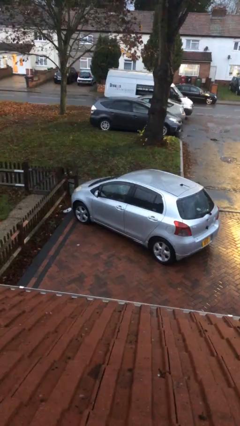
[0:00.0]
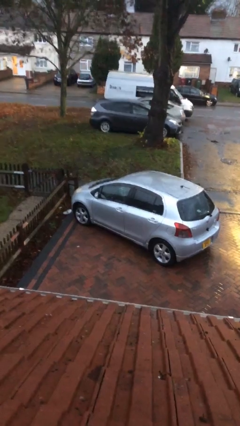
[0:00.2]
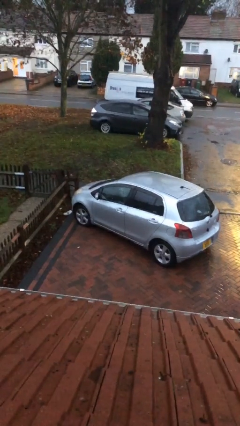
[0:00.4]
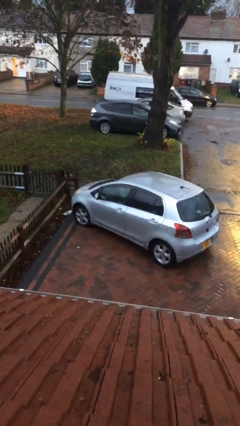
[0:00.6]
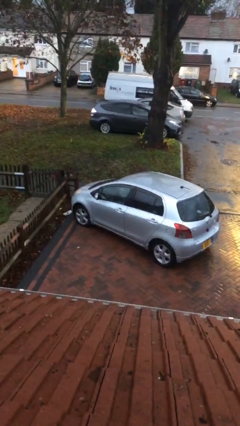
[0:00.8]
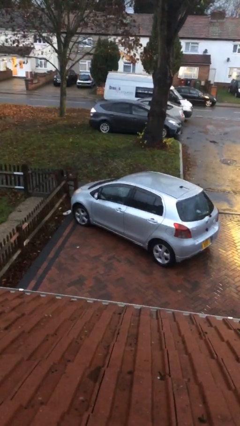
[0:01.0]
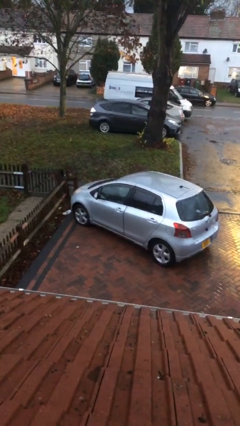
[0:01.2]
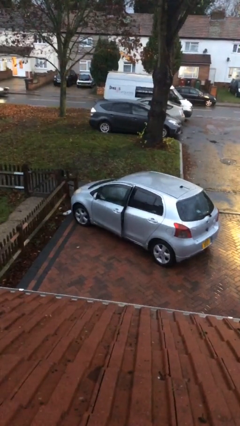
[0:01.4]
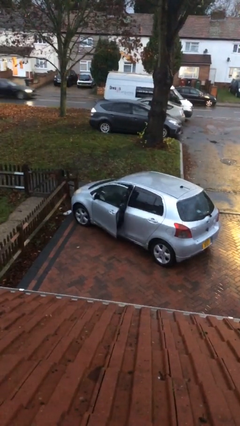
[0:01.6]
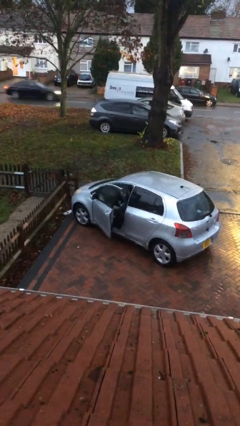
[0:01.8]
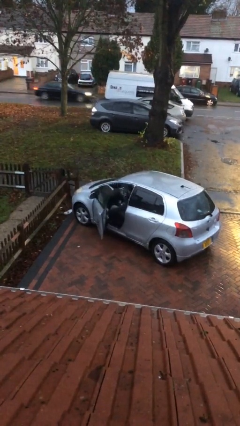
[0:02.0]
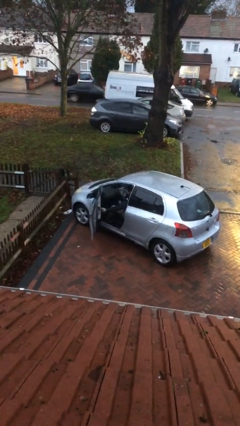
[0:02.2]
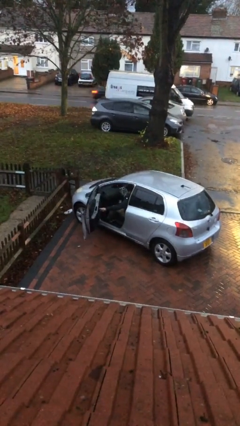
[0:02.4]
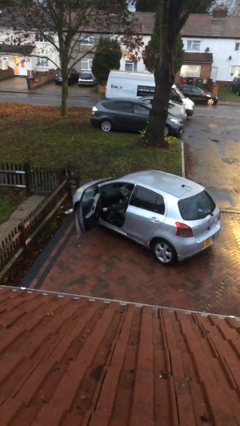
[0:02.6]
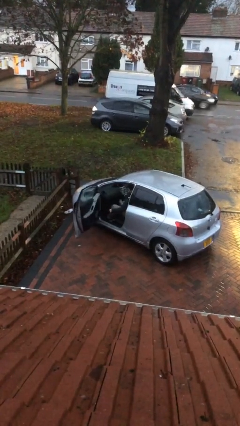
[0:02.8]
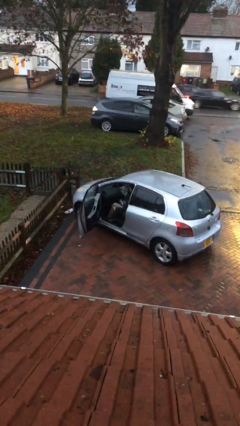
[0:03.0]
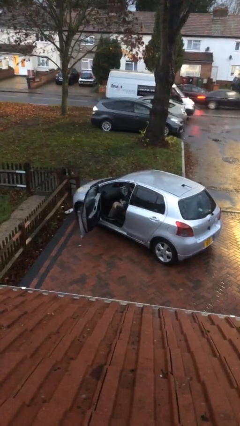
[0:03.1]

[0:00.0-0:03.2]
person opens car door

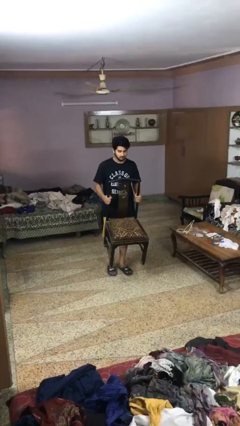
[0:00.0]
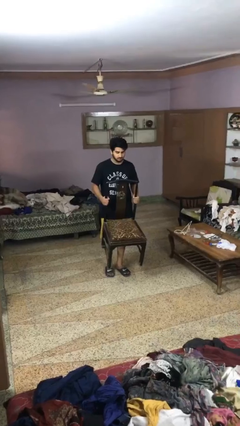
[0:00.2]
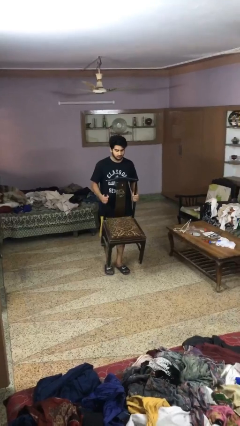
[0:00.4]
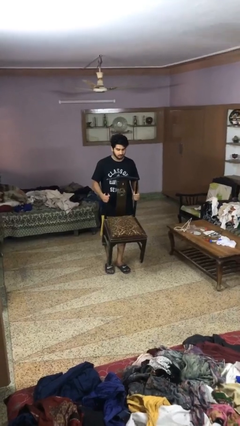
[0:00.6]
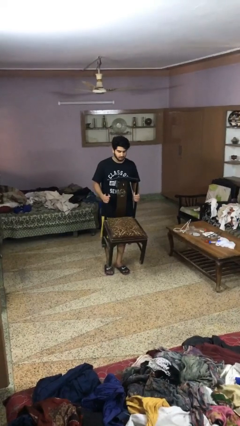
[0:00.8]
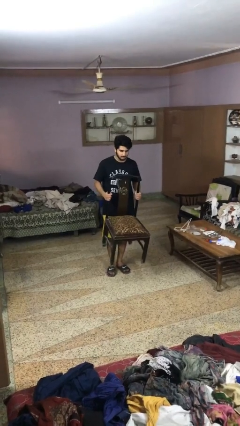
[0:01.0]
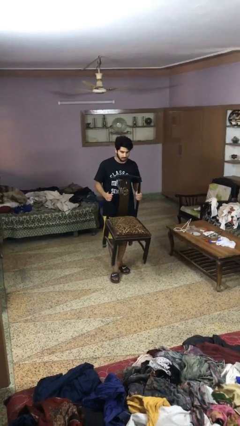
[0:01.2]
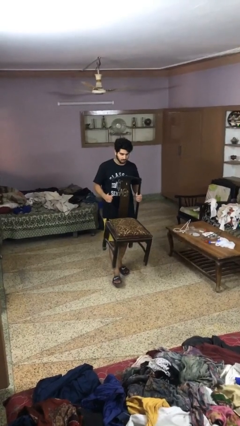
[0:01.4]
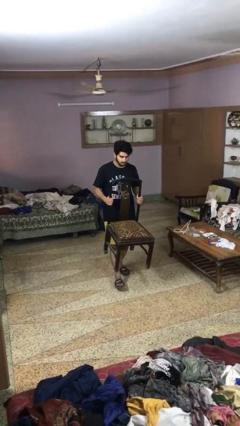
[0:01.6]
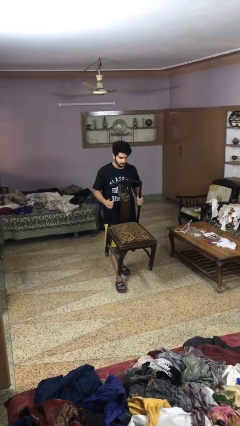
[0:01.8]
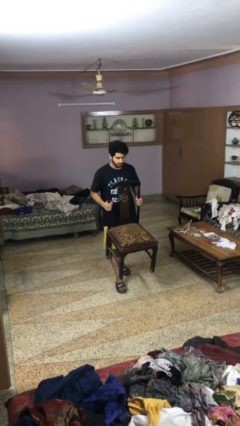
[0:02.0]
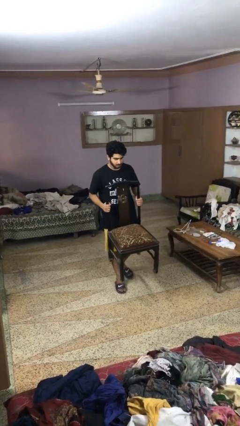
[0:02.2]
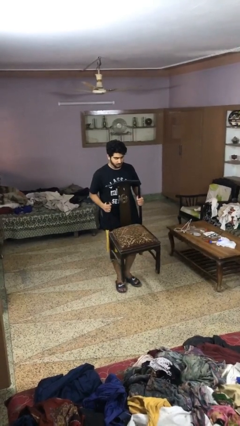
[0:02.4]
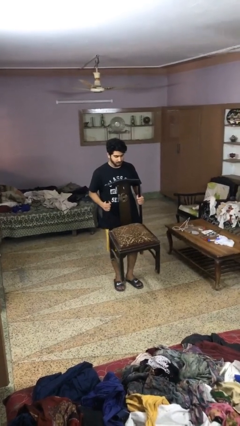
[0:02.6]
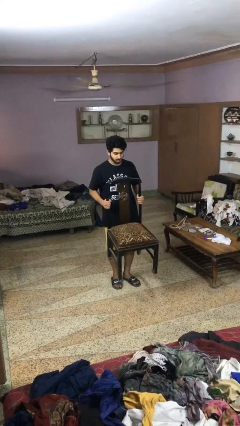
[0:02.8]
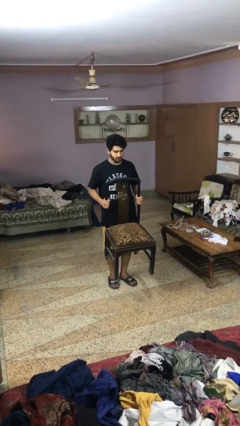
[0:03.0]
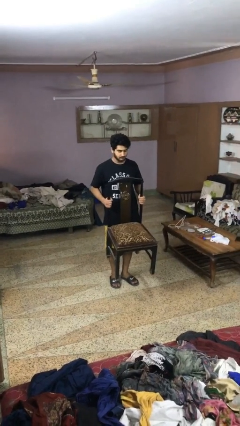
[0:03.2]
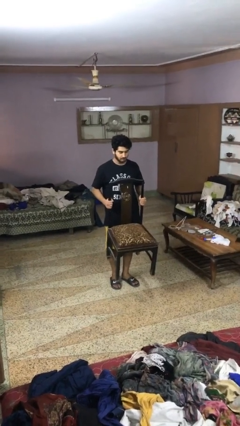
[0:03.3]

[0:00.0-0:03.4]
person carries furniture

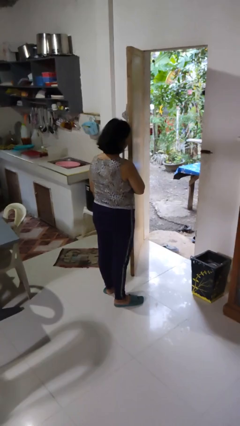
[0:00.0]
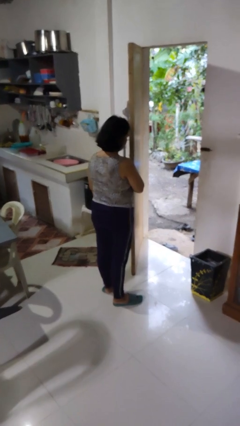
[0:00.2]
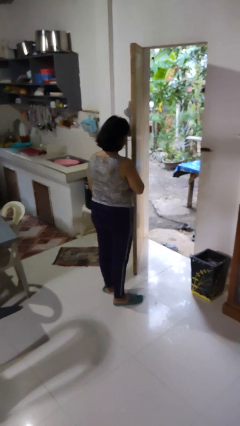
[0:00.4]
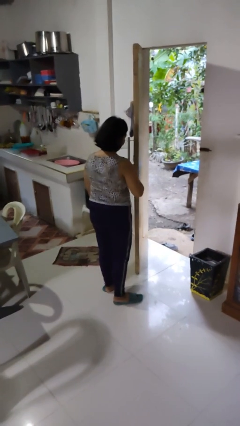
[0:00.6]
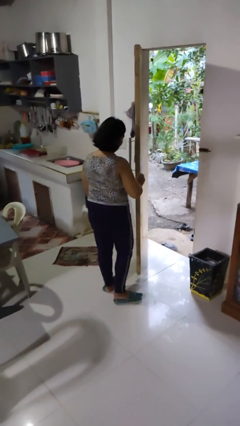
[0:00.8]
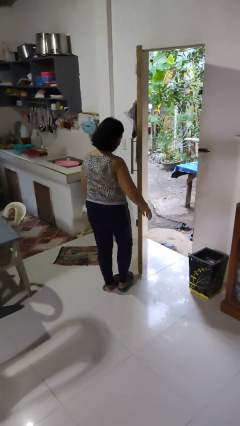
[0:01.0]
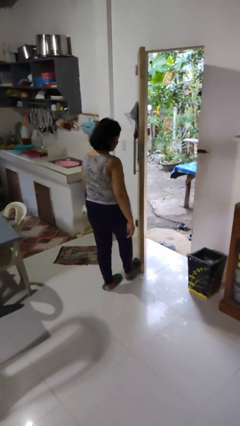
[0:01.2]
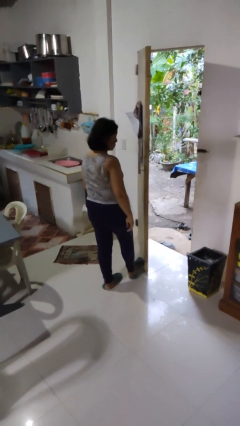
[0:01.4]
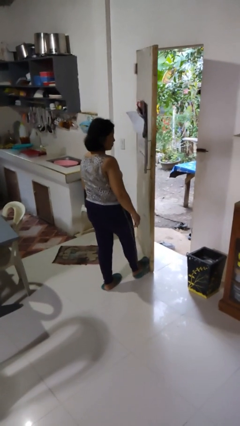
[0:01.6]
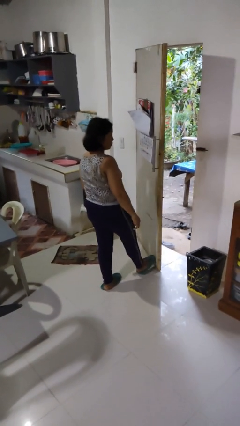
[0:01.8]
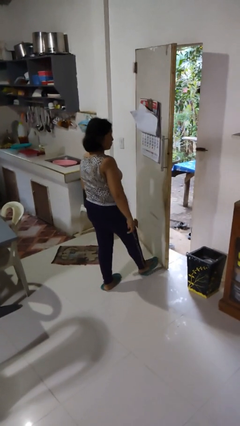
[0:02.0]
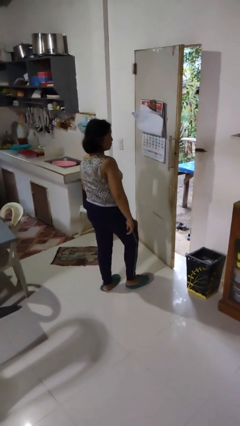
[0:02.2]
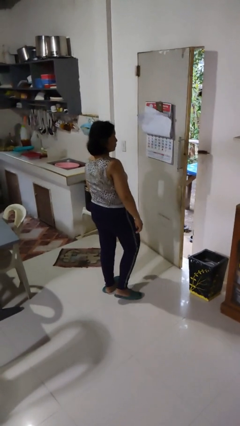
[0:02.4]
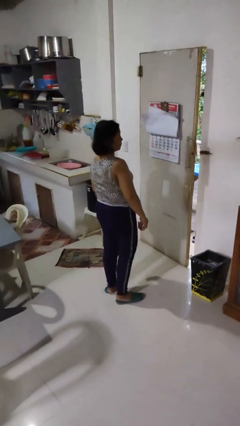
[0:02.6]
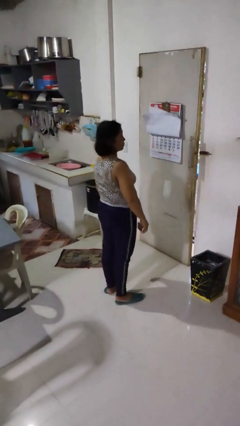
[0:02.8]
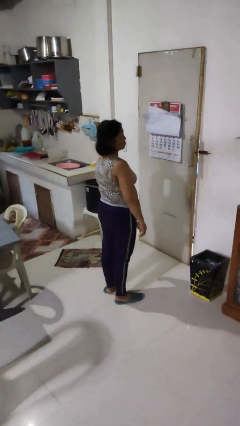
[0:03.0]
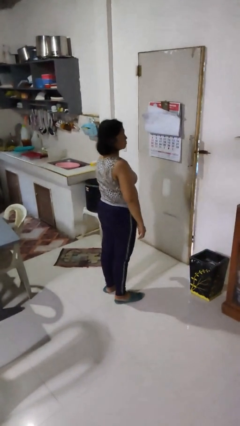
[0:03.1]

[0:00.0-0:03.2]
person closes door with foot

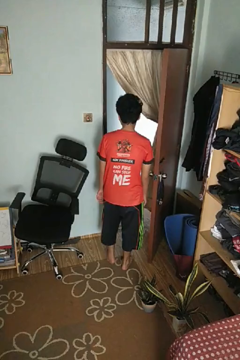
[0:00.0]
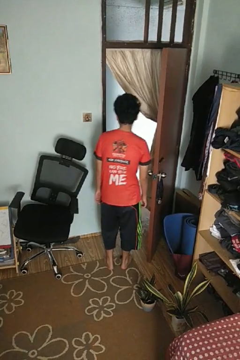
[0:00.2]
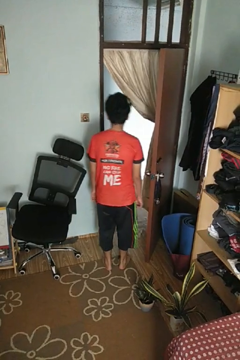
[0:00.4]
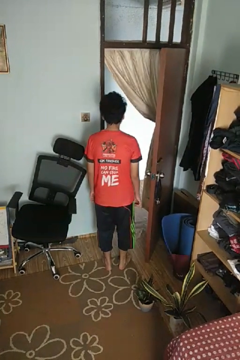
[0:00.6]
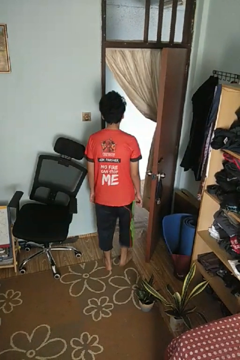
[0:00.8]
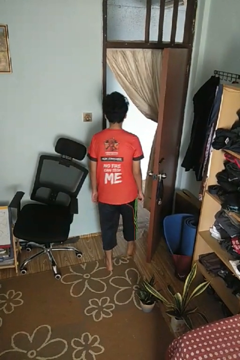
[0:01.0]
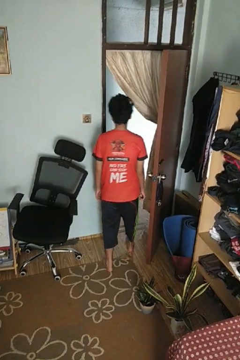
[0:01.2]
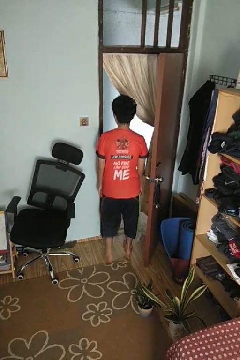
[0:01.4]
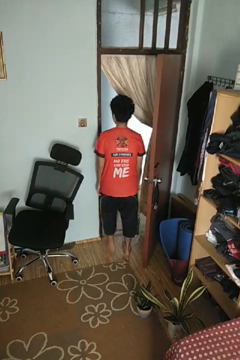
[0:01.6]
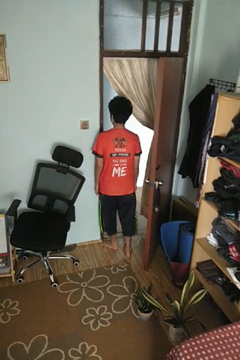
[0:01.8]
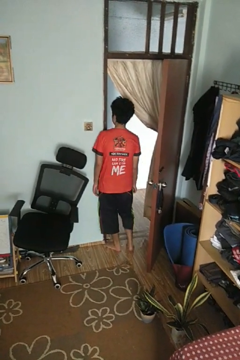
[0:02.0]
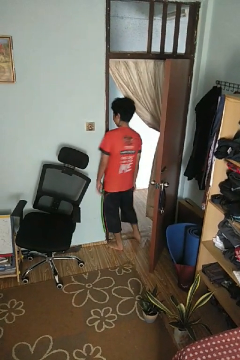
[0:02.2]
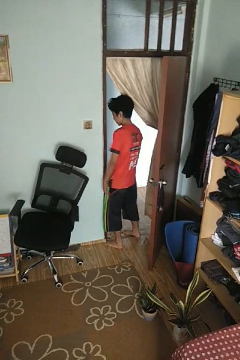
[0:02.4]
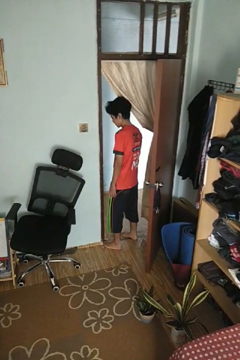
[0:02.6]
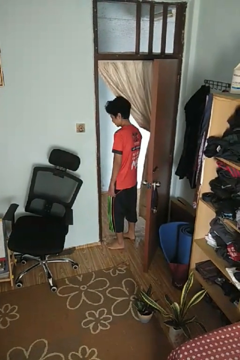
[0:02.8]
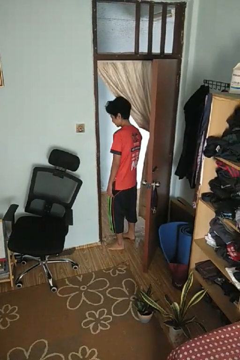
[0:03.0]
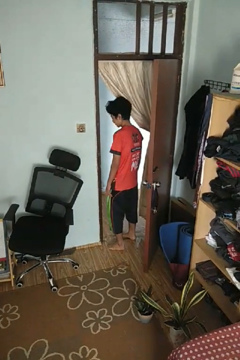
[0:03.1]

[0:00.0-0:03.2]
person bumps into wall

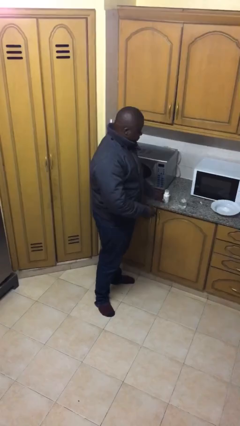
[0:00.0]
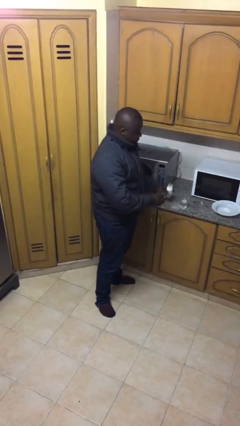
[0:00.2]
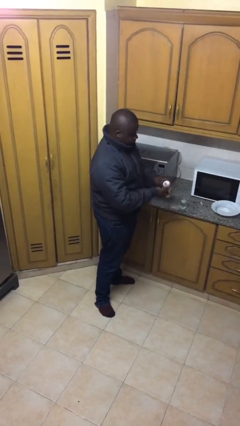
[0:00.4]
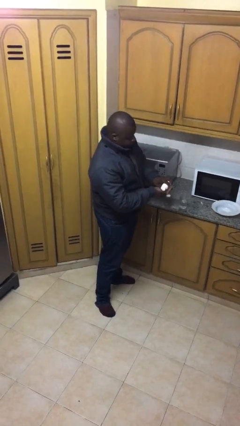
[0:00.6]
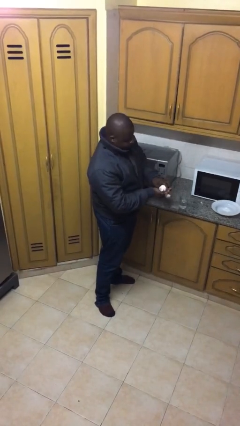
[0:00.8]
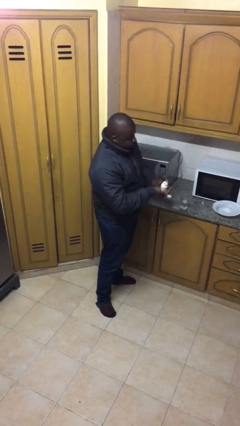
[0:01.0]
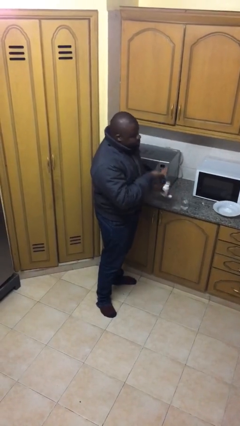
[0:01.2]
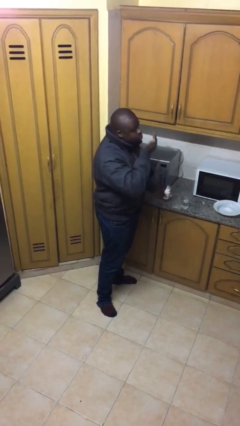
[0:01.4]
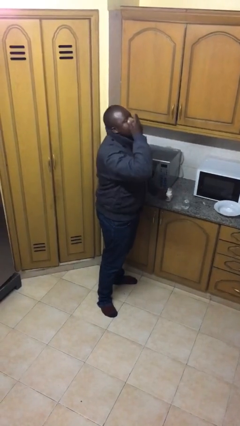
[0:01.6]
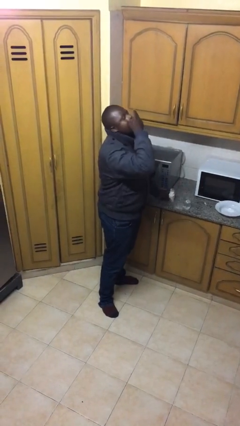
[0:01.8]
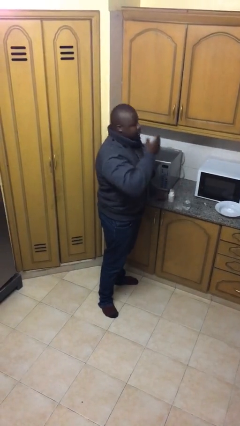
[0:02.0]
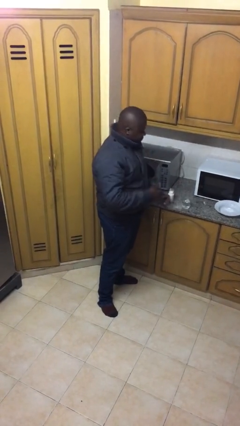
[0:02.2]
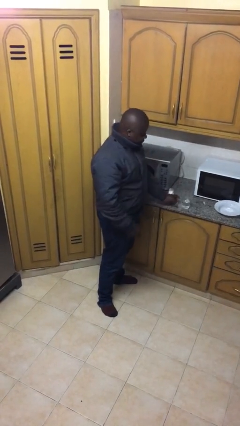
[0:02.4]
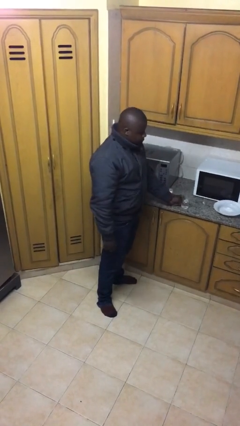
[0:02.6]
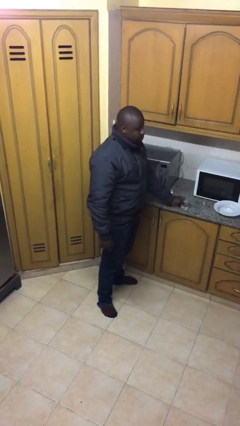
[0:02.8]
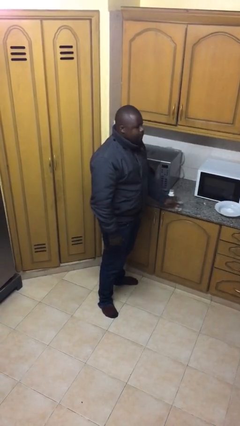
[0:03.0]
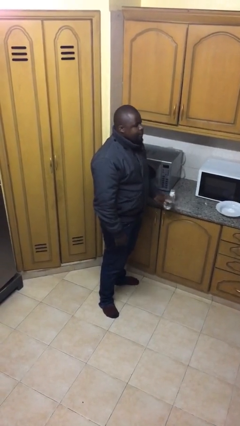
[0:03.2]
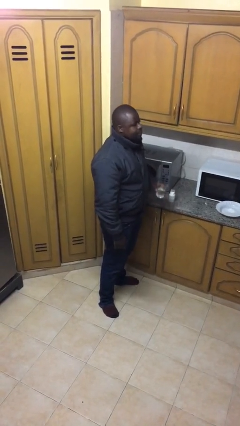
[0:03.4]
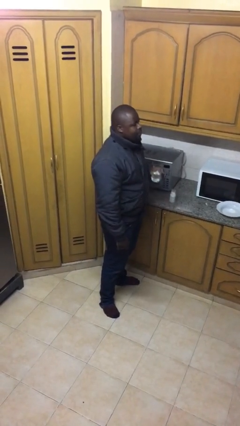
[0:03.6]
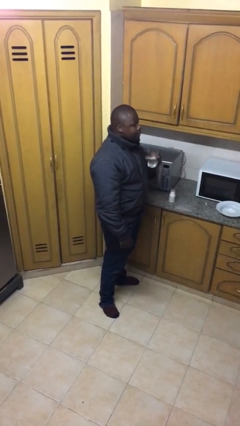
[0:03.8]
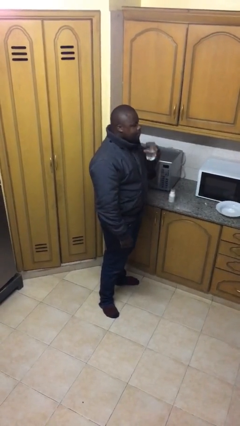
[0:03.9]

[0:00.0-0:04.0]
person takes medicine pills

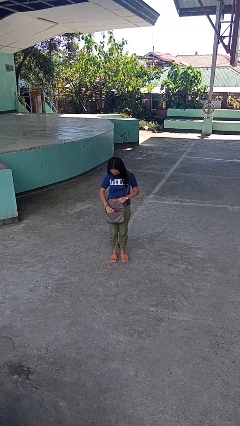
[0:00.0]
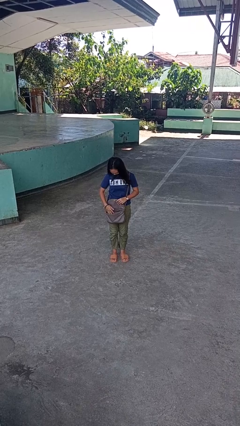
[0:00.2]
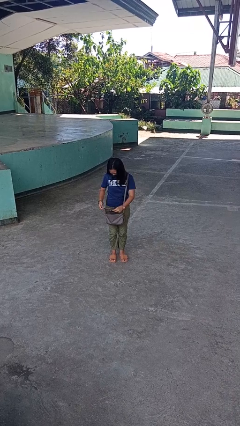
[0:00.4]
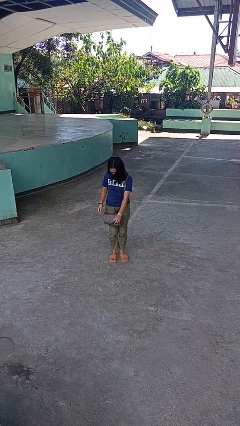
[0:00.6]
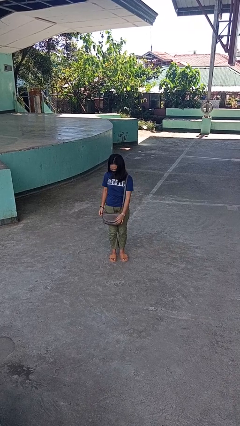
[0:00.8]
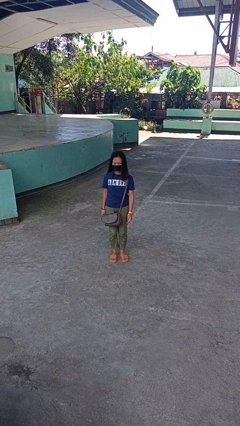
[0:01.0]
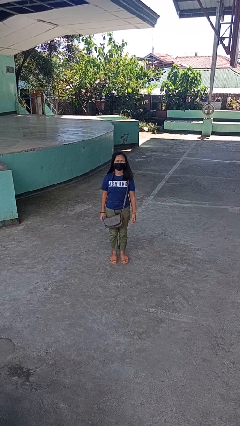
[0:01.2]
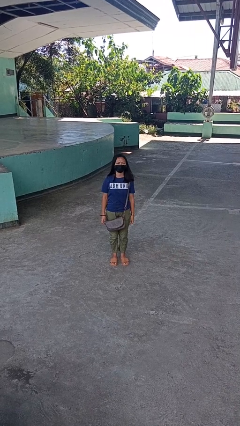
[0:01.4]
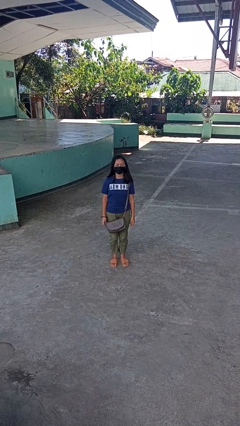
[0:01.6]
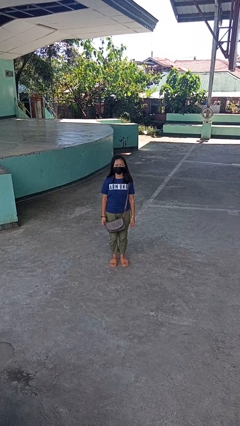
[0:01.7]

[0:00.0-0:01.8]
person puts object into purse
